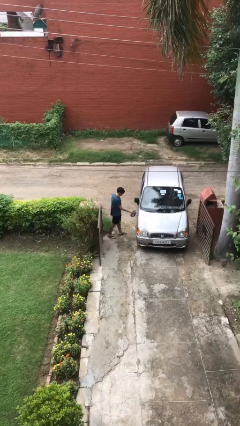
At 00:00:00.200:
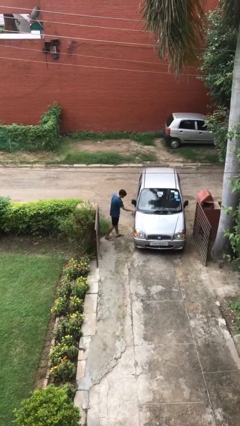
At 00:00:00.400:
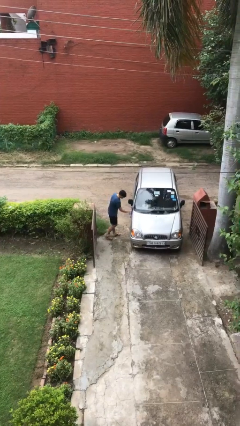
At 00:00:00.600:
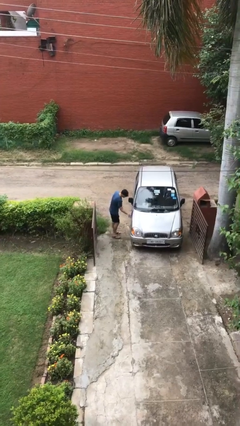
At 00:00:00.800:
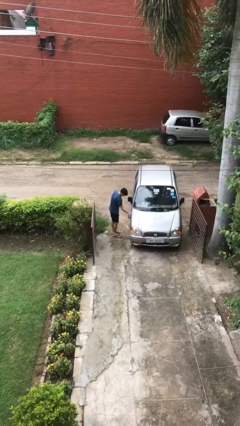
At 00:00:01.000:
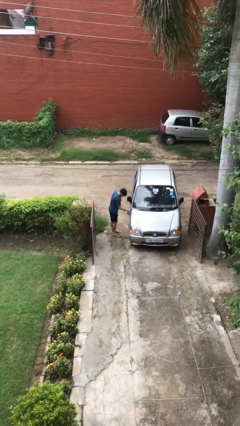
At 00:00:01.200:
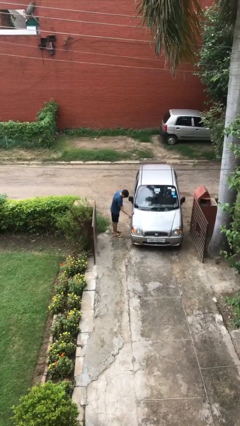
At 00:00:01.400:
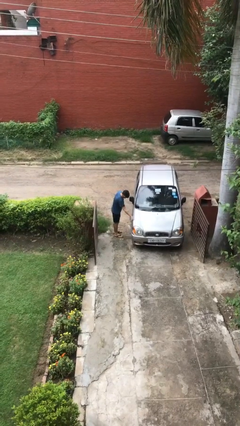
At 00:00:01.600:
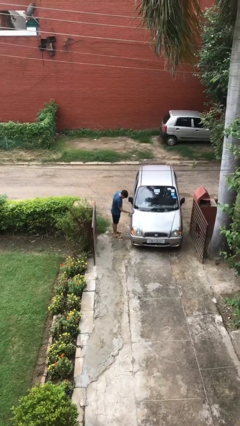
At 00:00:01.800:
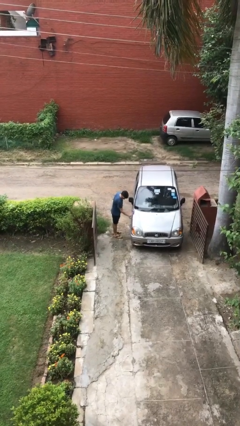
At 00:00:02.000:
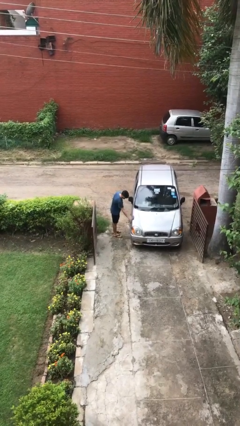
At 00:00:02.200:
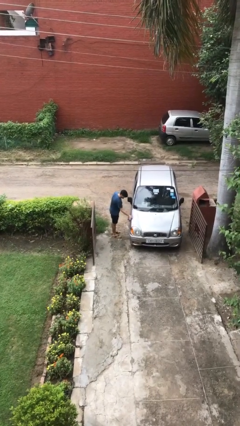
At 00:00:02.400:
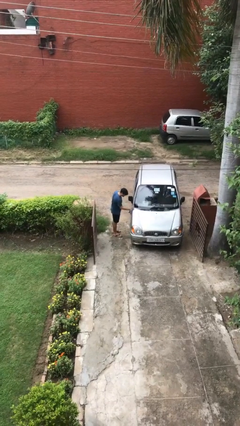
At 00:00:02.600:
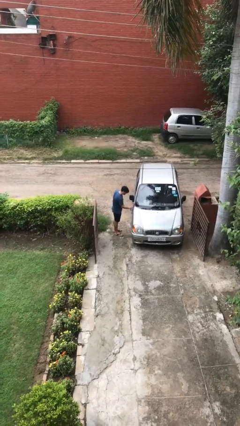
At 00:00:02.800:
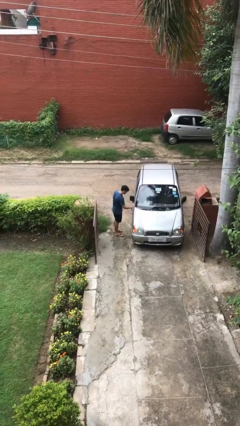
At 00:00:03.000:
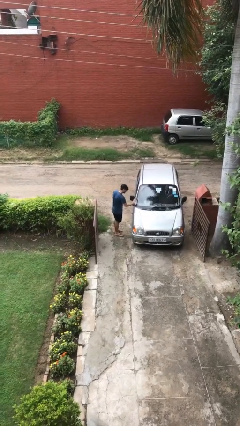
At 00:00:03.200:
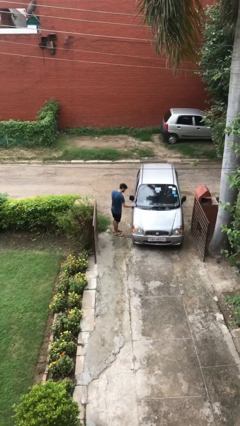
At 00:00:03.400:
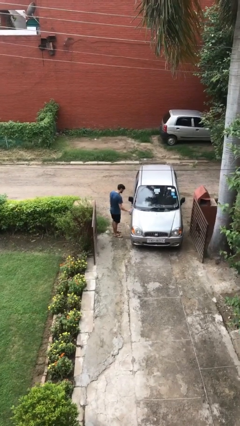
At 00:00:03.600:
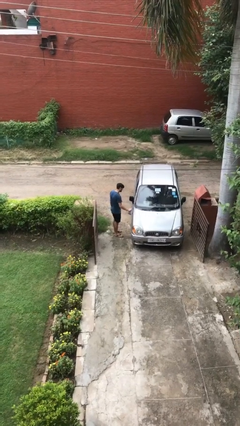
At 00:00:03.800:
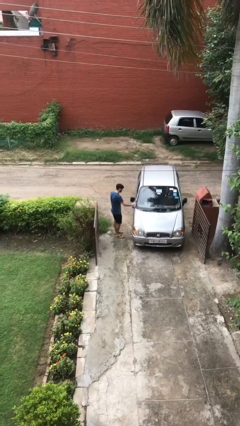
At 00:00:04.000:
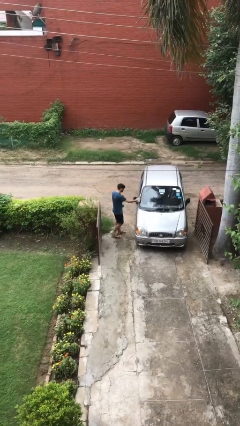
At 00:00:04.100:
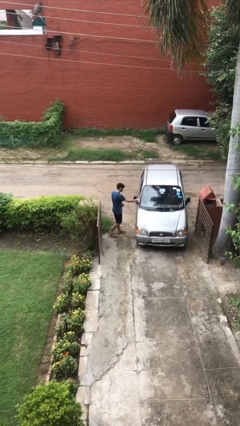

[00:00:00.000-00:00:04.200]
person polishes car with rag

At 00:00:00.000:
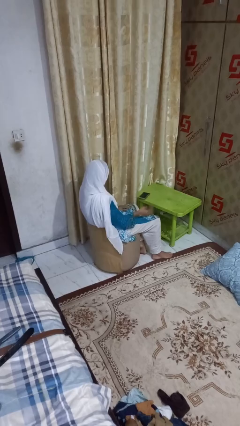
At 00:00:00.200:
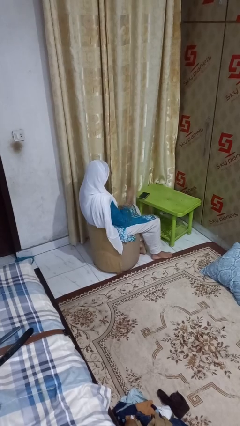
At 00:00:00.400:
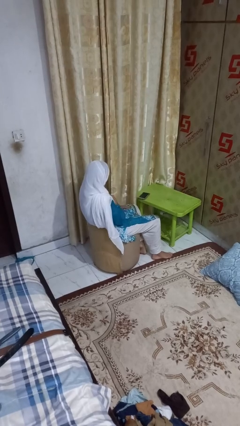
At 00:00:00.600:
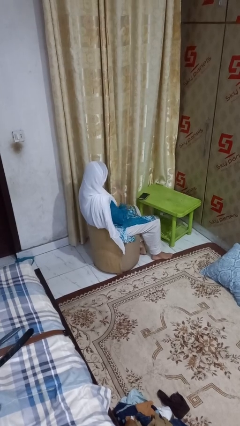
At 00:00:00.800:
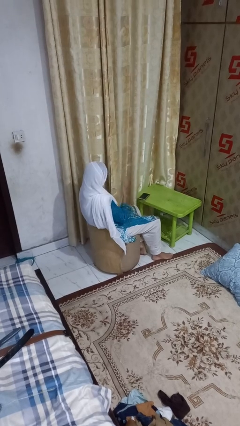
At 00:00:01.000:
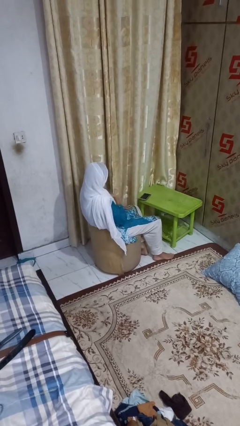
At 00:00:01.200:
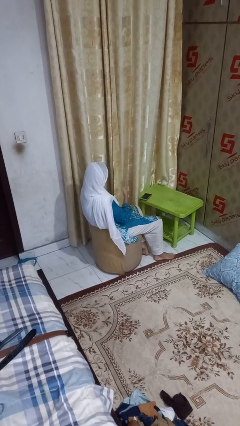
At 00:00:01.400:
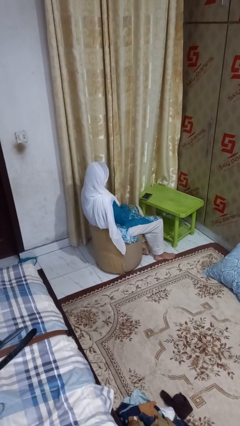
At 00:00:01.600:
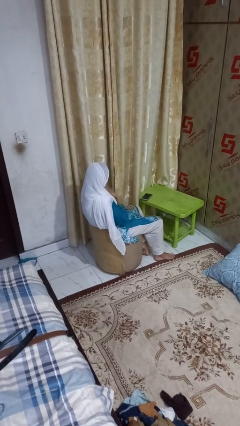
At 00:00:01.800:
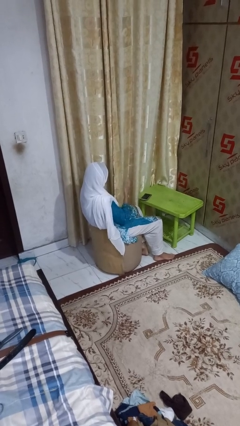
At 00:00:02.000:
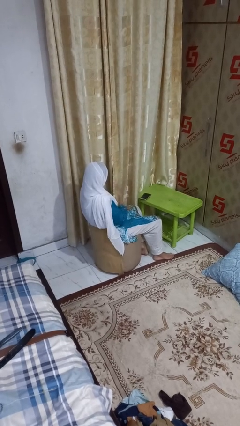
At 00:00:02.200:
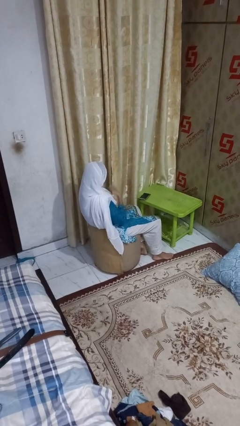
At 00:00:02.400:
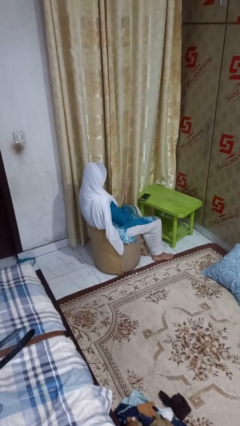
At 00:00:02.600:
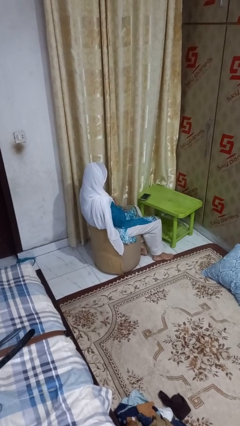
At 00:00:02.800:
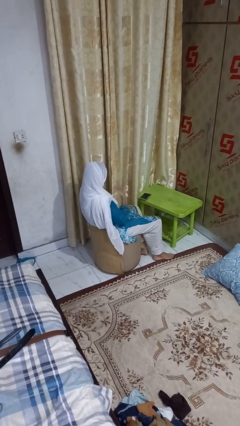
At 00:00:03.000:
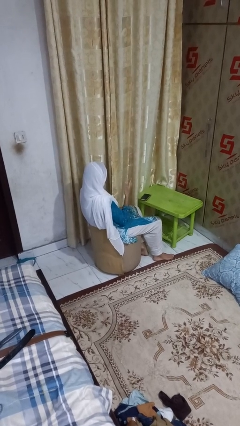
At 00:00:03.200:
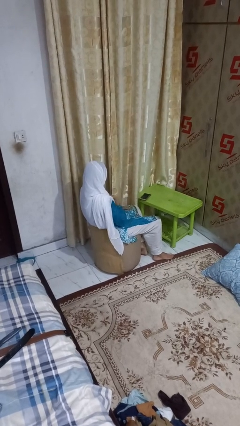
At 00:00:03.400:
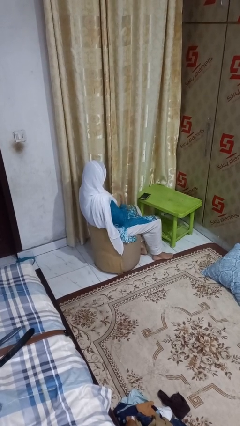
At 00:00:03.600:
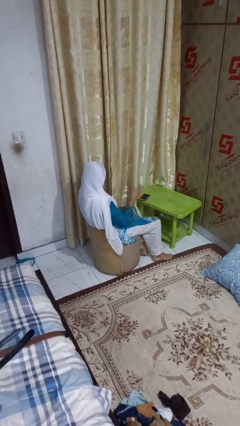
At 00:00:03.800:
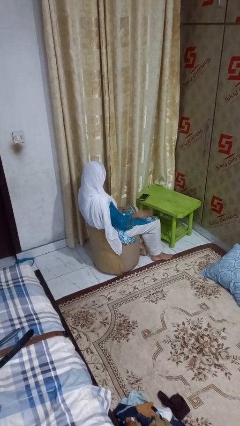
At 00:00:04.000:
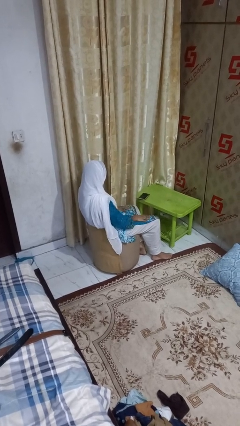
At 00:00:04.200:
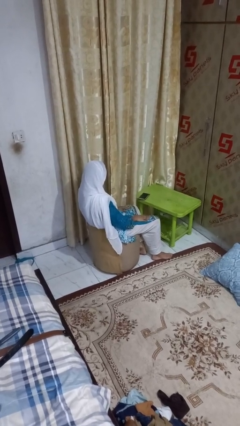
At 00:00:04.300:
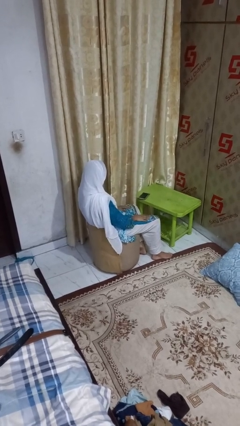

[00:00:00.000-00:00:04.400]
person drums on chest

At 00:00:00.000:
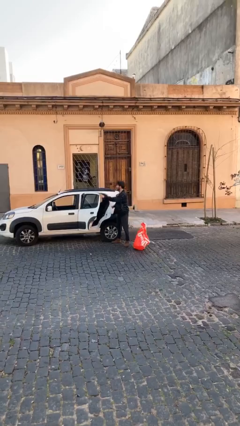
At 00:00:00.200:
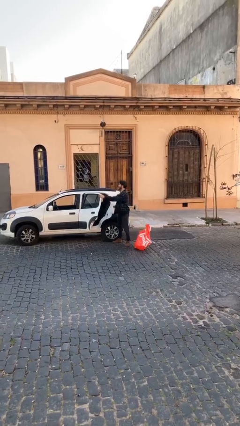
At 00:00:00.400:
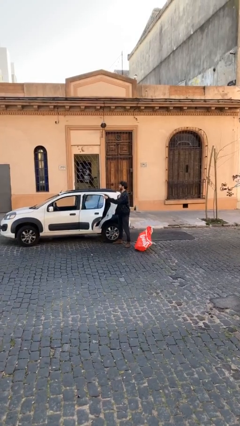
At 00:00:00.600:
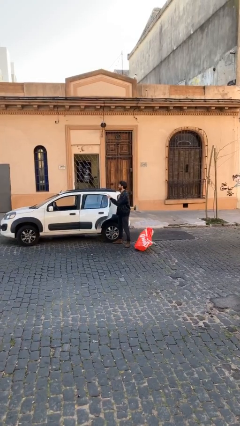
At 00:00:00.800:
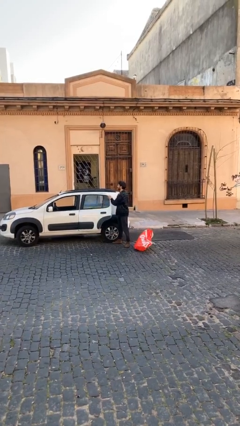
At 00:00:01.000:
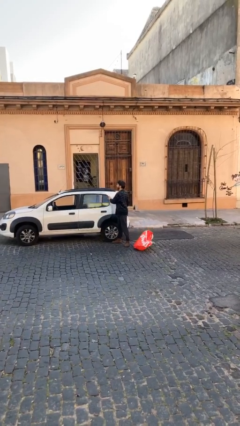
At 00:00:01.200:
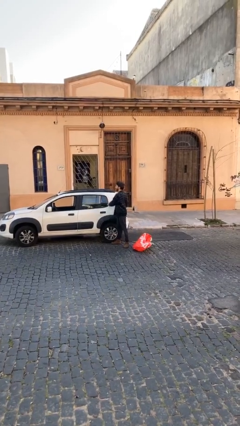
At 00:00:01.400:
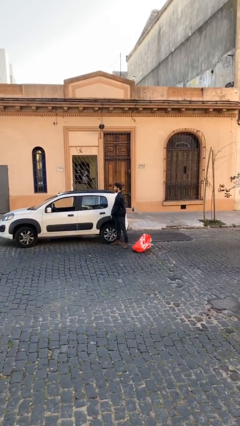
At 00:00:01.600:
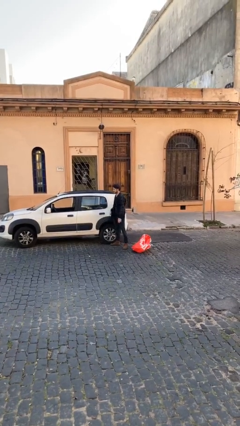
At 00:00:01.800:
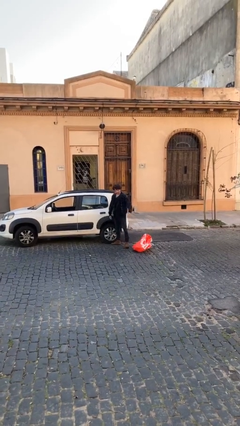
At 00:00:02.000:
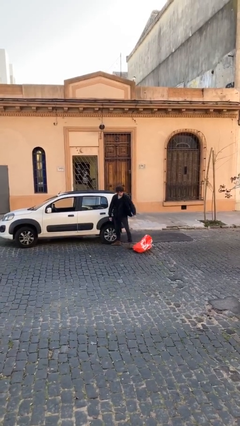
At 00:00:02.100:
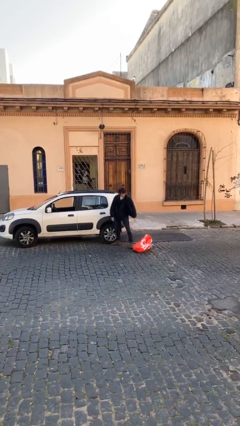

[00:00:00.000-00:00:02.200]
person closes car door

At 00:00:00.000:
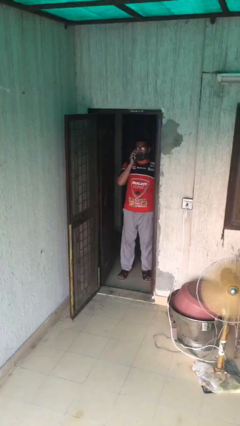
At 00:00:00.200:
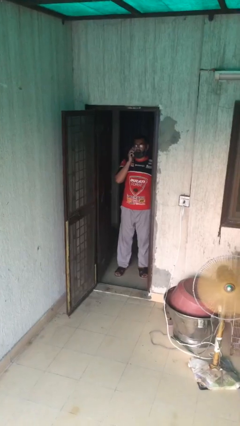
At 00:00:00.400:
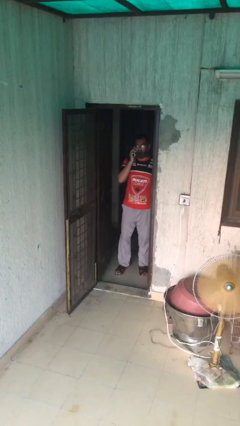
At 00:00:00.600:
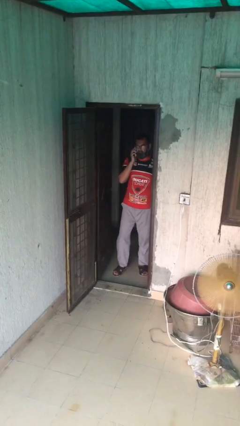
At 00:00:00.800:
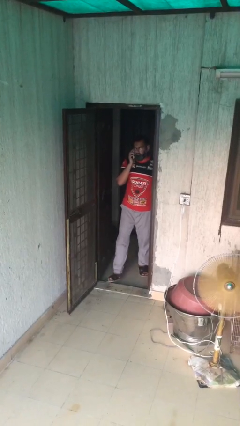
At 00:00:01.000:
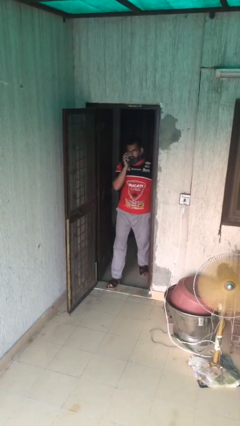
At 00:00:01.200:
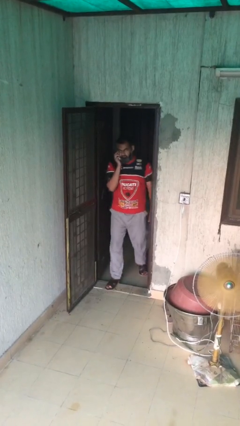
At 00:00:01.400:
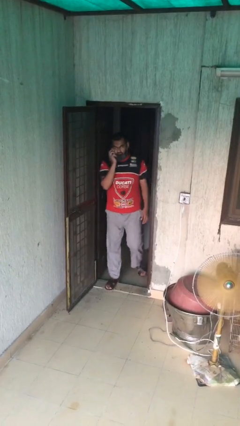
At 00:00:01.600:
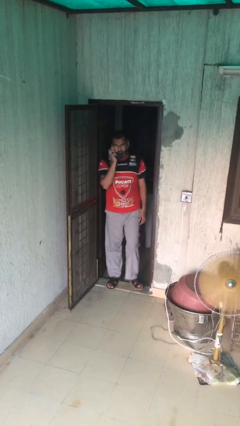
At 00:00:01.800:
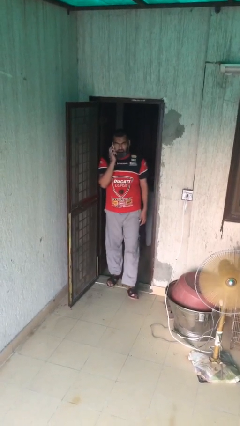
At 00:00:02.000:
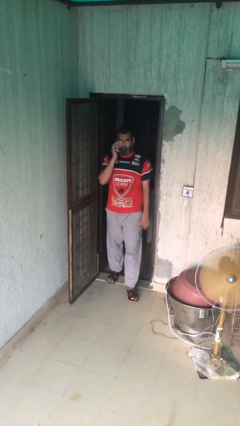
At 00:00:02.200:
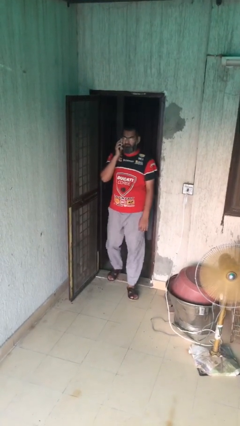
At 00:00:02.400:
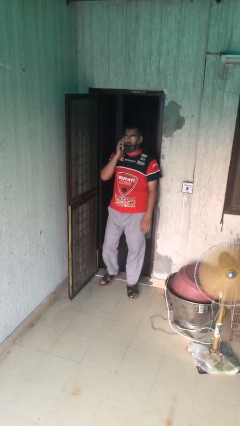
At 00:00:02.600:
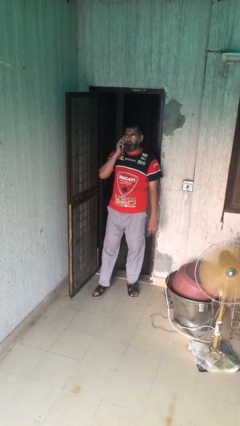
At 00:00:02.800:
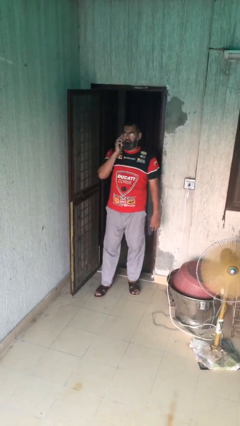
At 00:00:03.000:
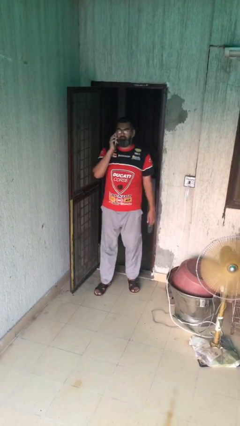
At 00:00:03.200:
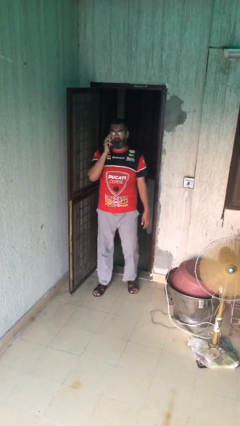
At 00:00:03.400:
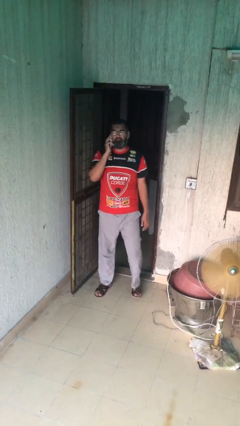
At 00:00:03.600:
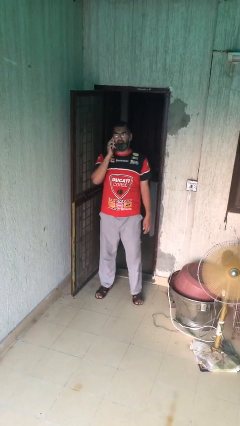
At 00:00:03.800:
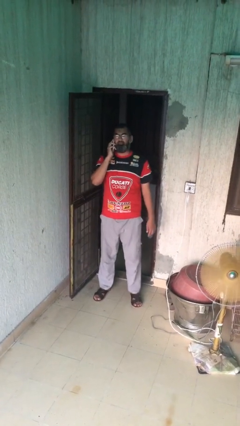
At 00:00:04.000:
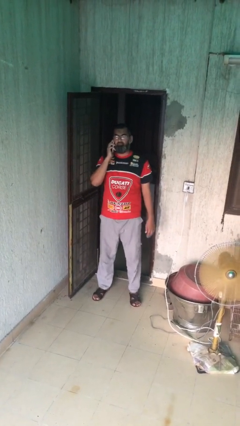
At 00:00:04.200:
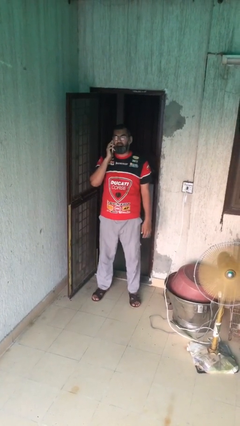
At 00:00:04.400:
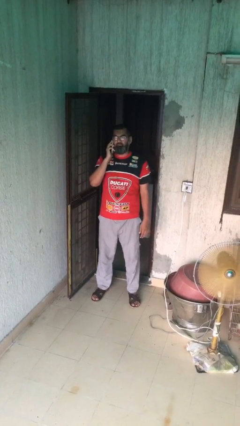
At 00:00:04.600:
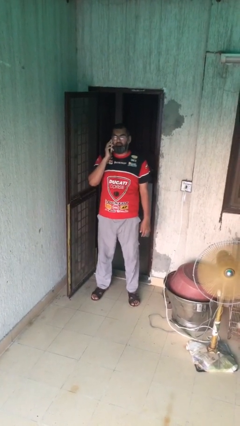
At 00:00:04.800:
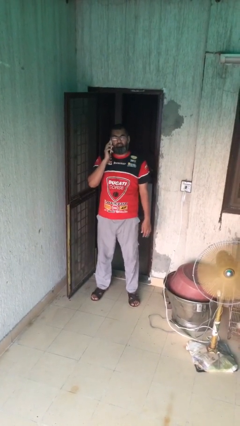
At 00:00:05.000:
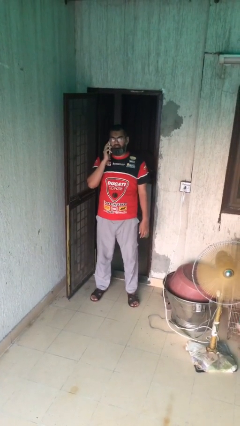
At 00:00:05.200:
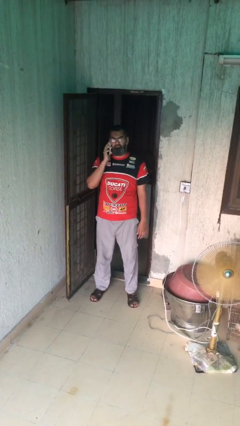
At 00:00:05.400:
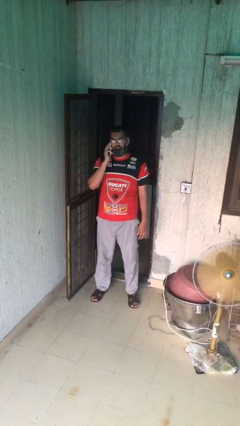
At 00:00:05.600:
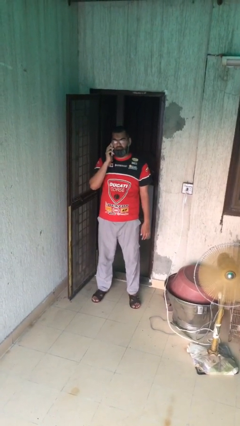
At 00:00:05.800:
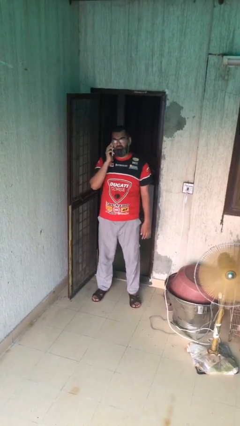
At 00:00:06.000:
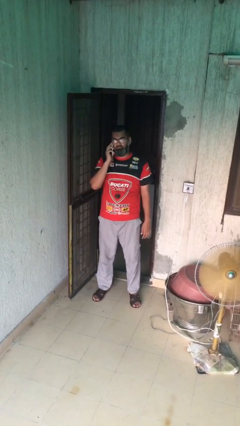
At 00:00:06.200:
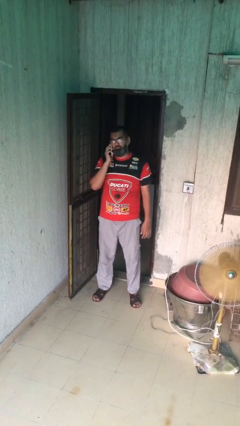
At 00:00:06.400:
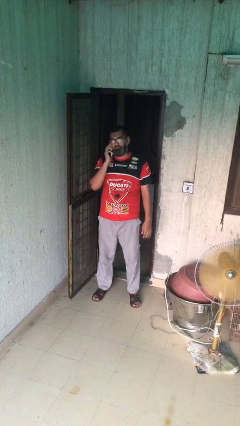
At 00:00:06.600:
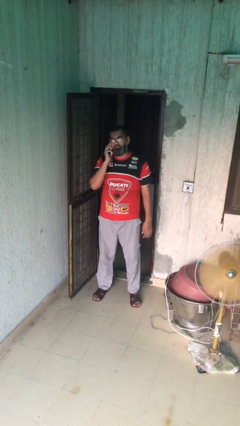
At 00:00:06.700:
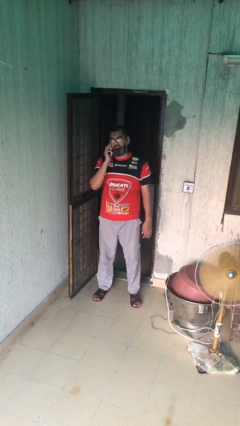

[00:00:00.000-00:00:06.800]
person enters scene through structure
